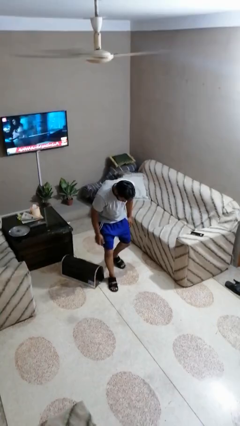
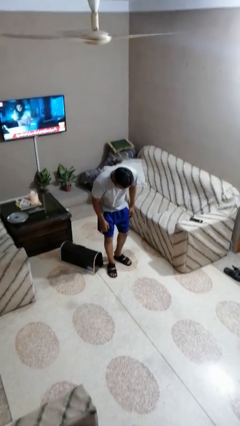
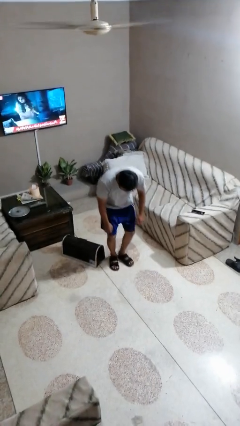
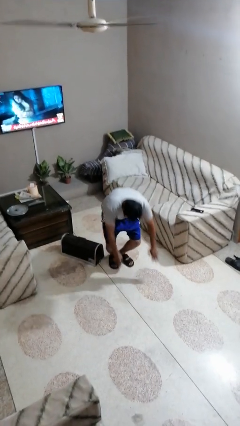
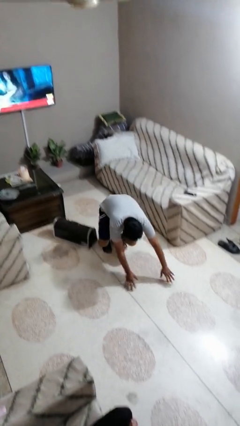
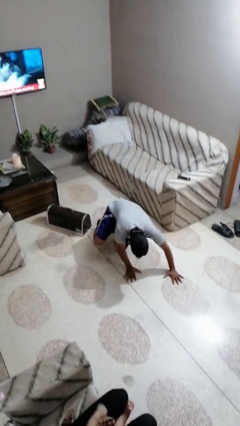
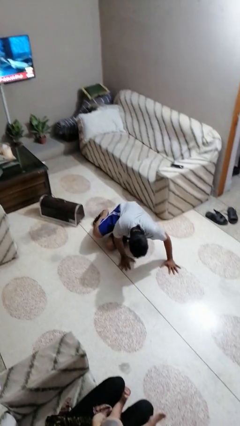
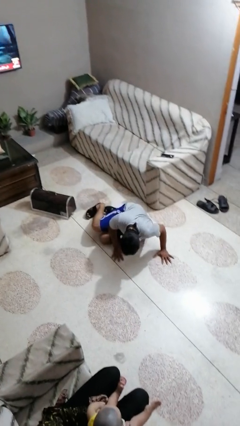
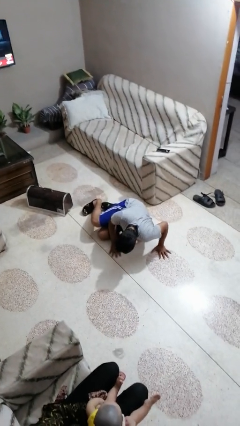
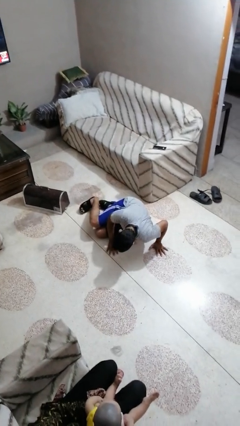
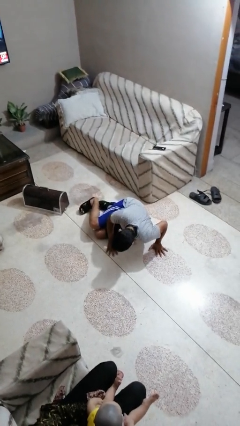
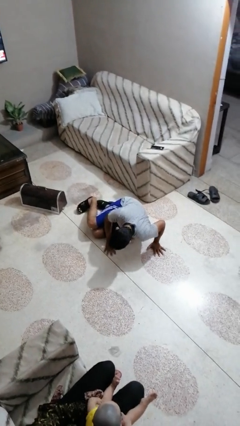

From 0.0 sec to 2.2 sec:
person lies down on floor

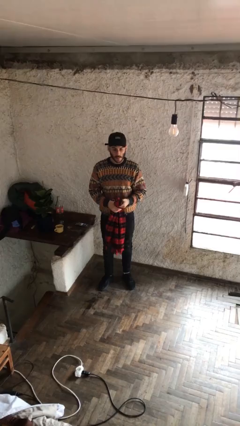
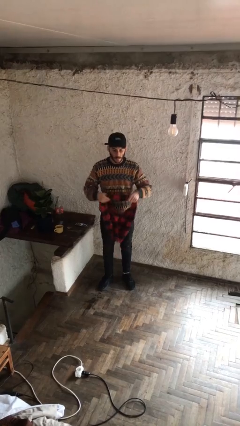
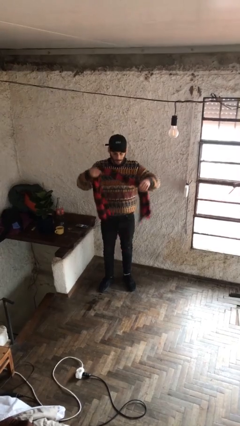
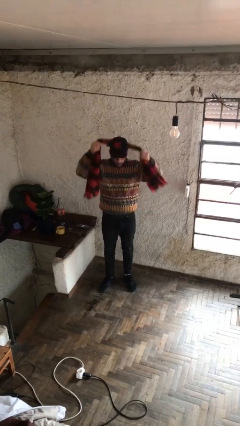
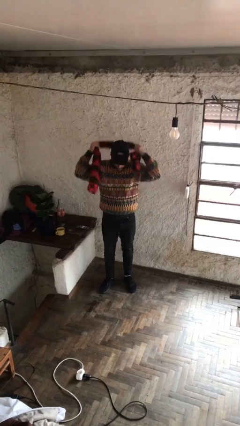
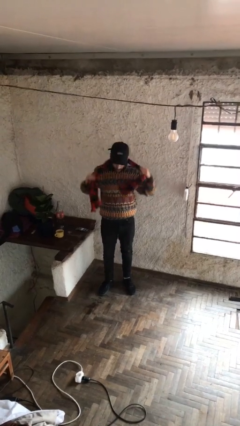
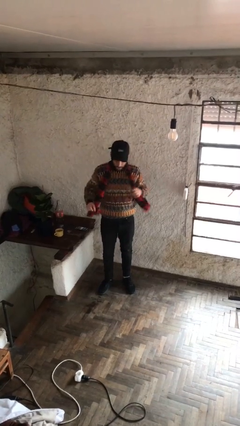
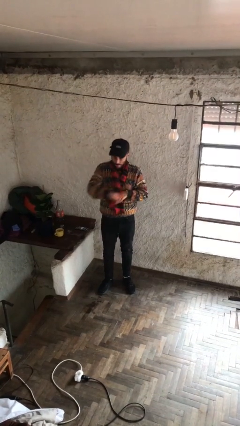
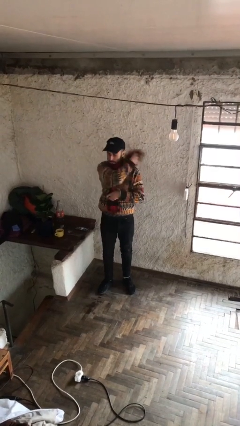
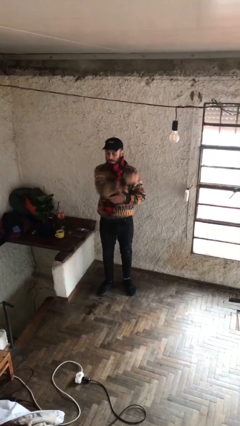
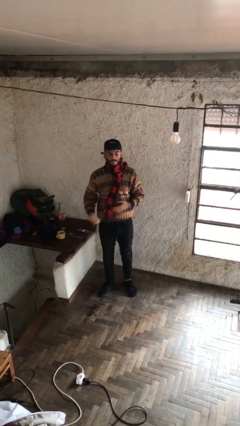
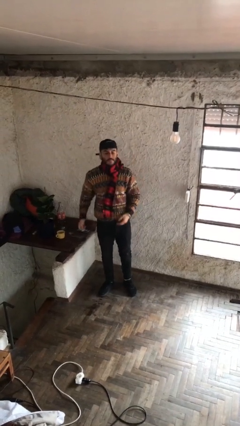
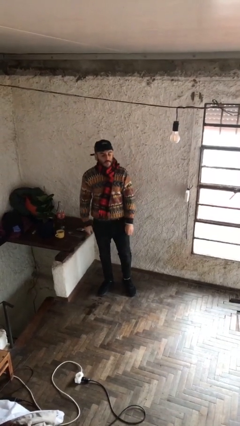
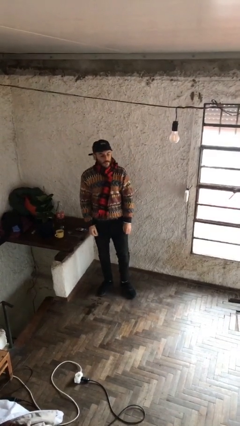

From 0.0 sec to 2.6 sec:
person puts on scarf

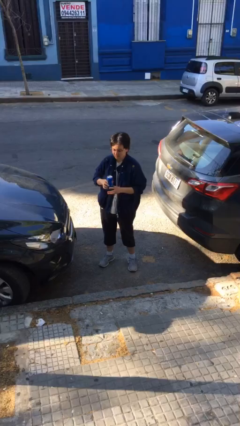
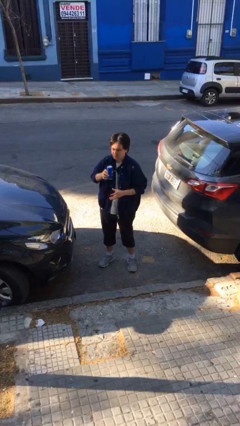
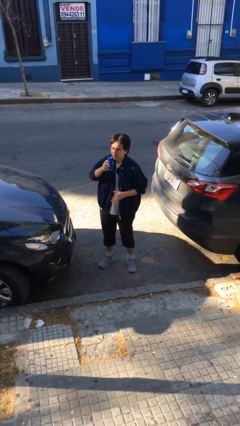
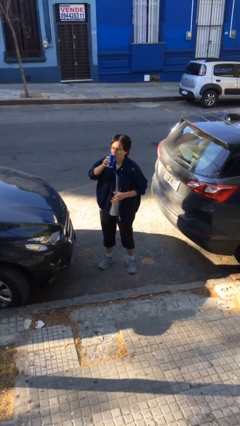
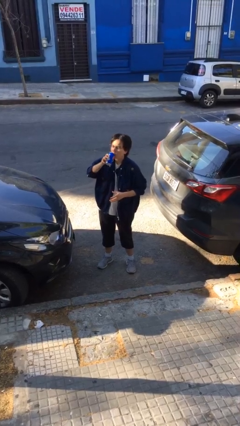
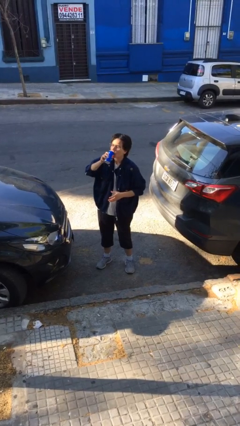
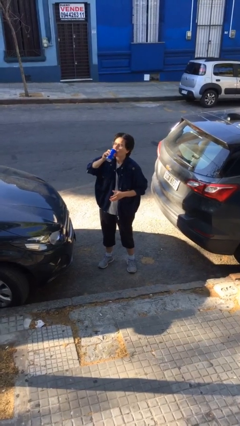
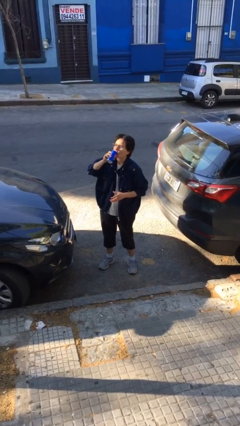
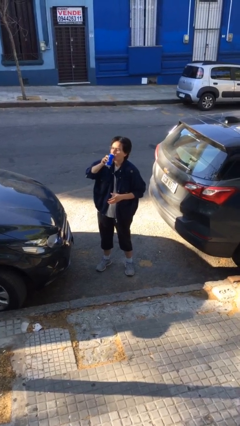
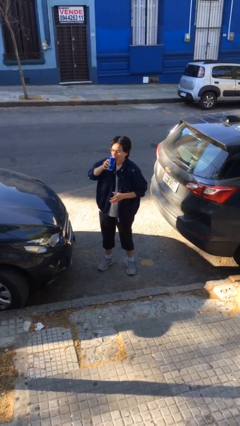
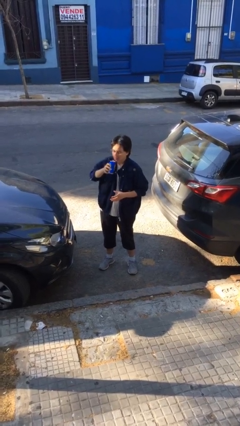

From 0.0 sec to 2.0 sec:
person drinks from beverage can

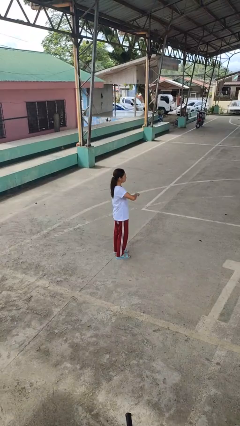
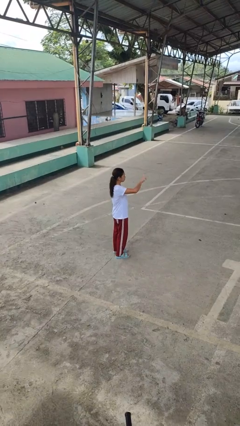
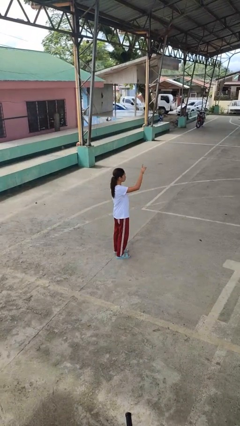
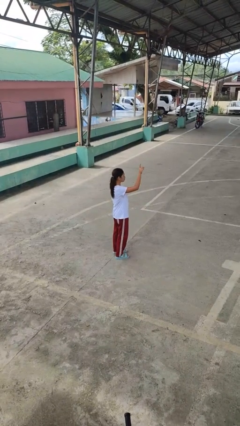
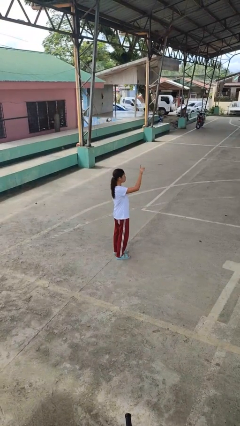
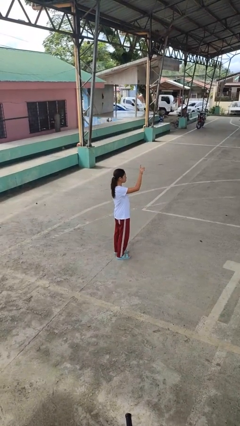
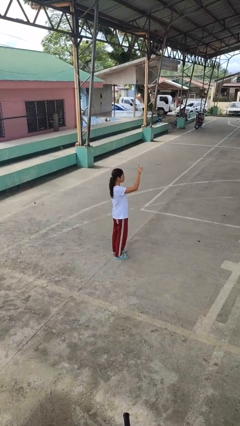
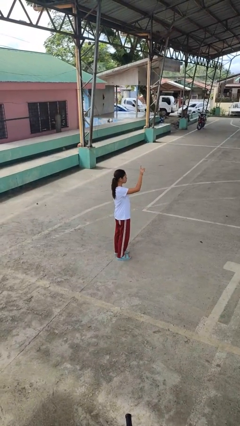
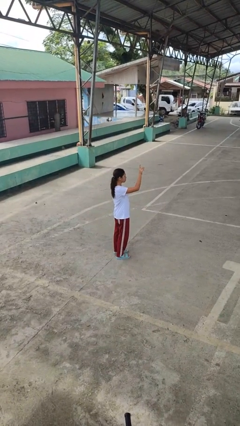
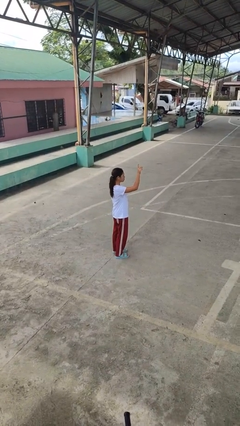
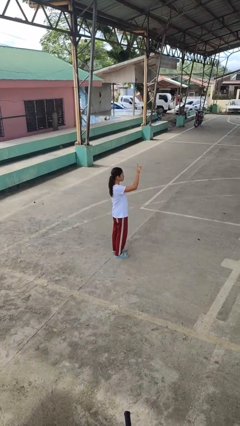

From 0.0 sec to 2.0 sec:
person gestures swipe up

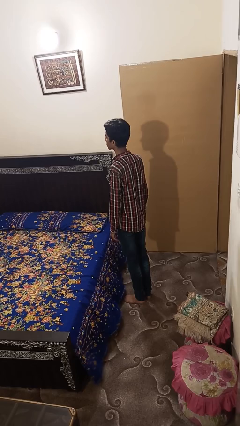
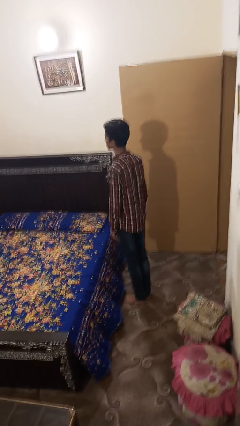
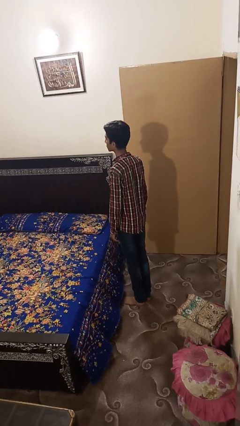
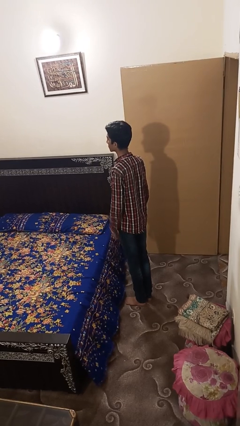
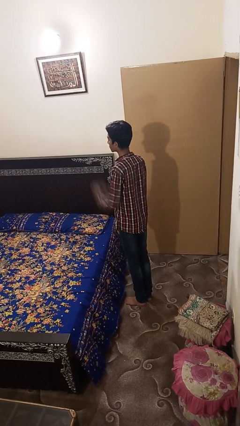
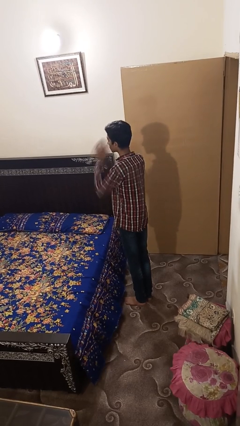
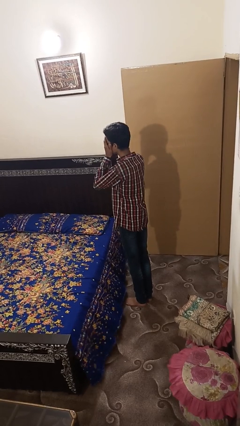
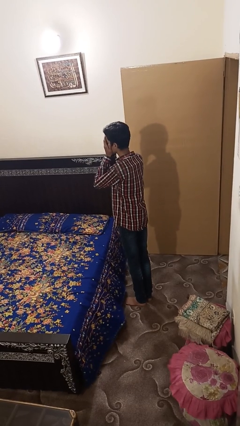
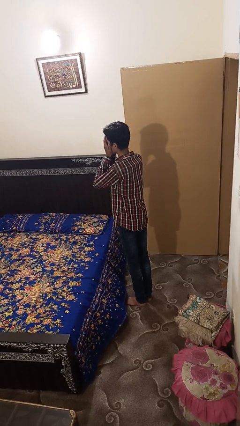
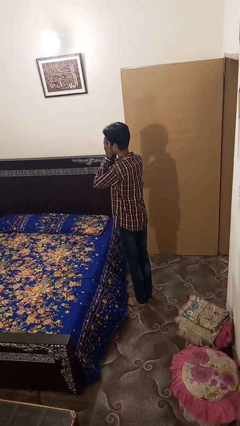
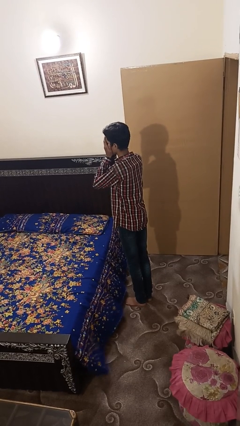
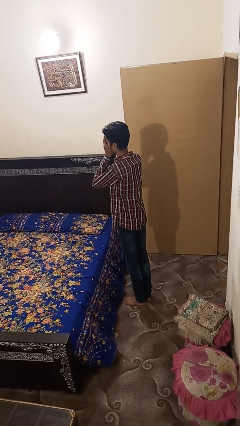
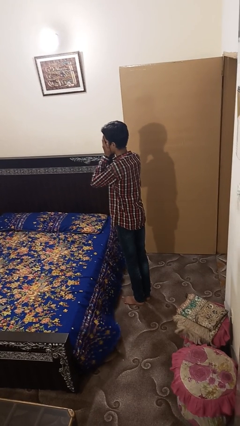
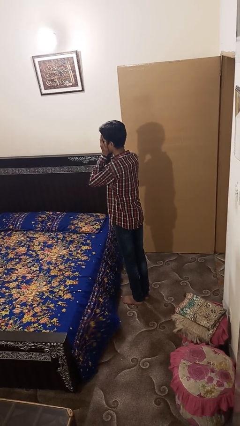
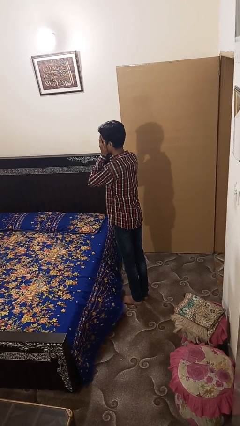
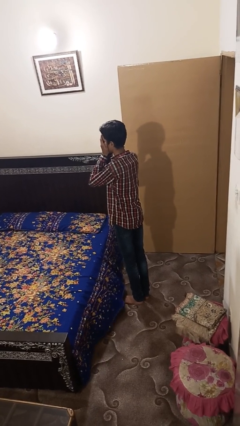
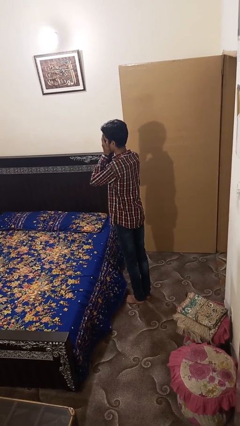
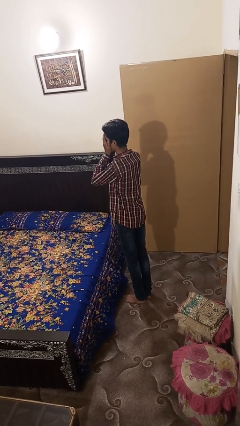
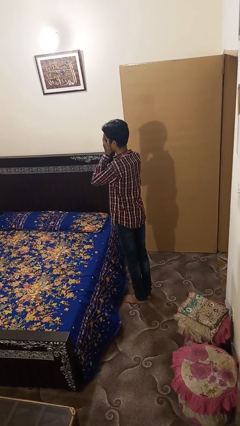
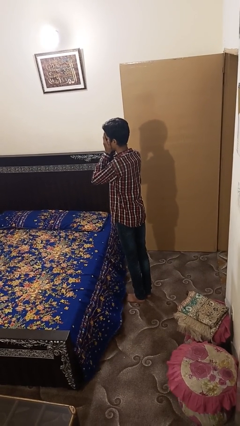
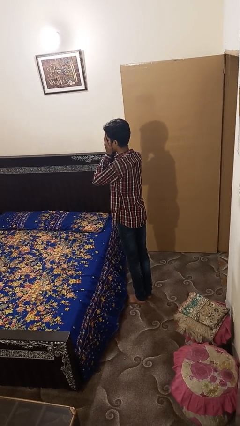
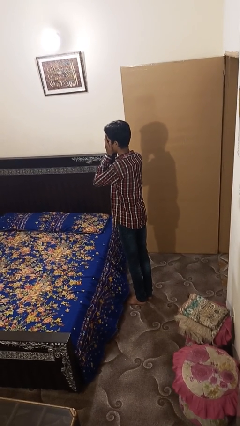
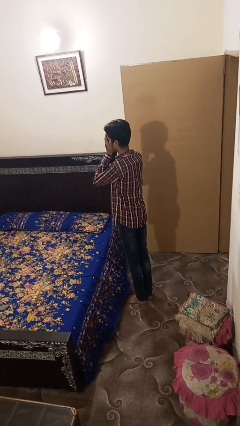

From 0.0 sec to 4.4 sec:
person covers face with hands

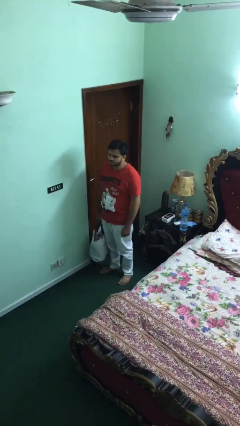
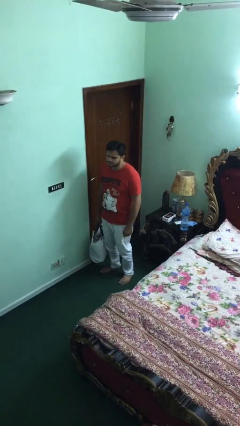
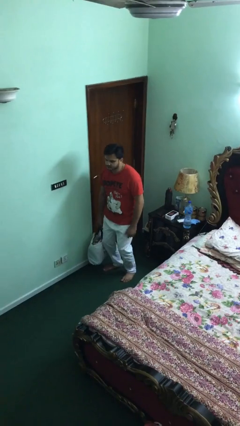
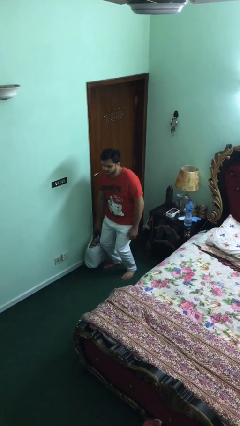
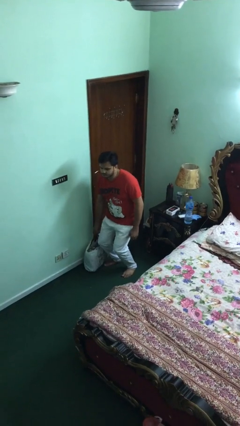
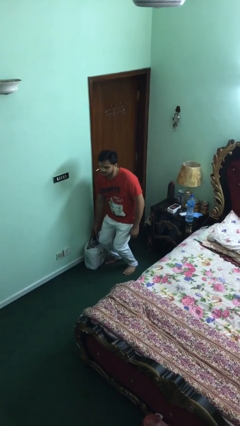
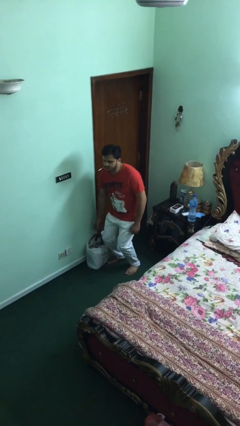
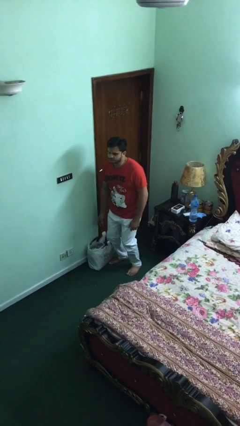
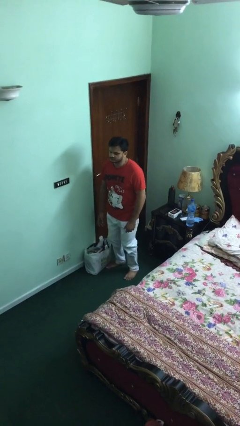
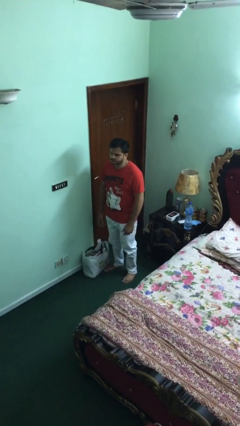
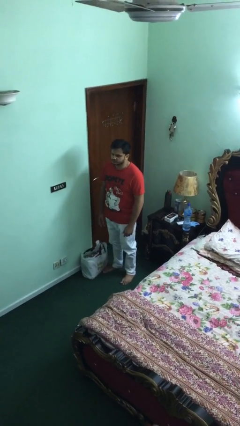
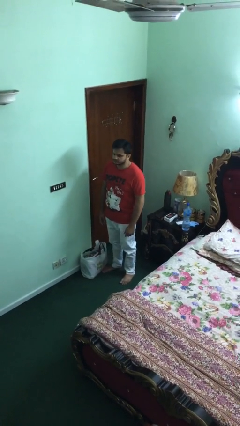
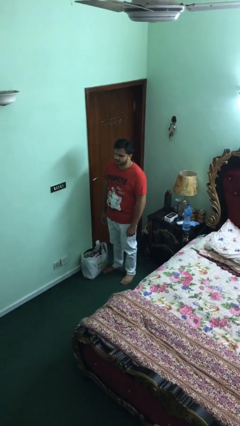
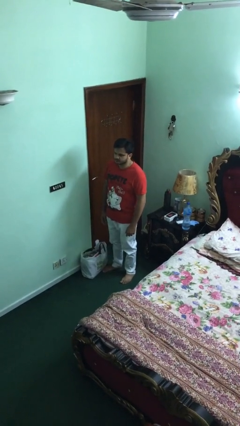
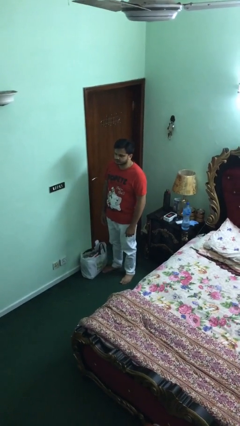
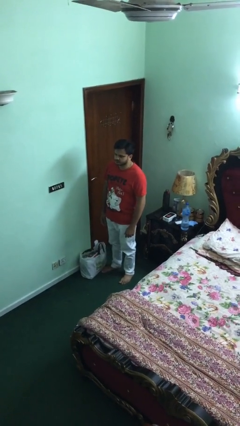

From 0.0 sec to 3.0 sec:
person puts down object on floor

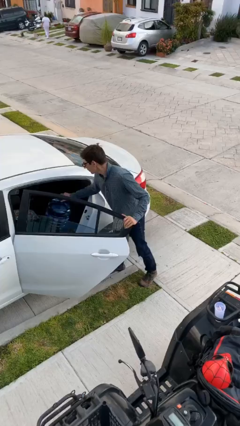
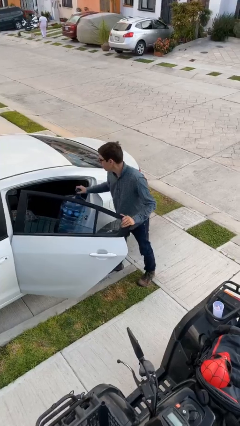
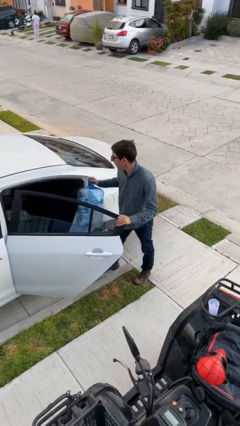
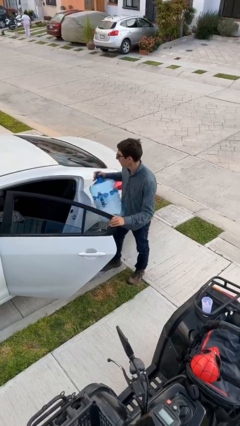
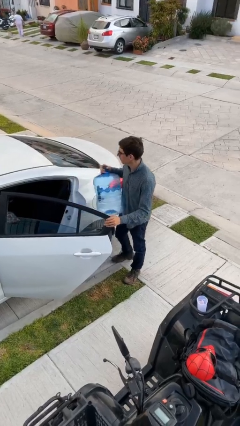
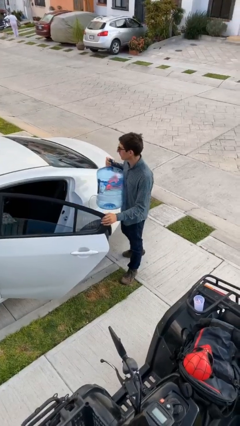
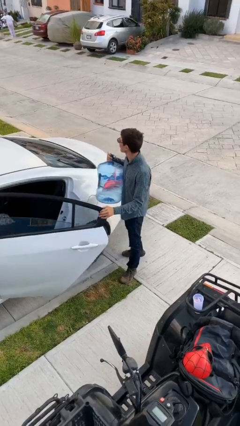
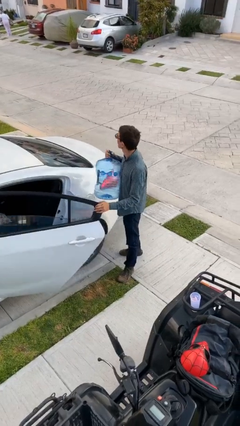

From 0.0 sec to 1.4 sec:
person unloads car
